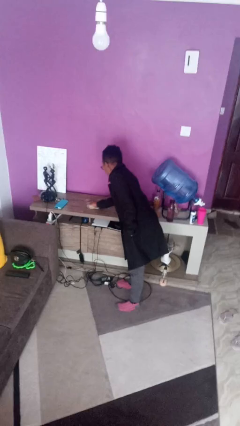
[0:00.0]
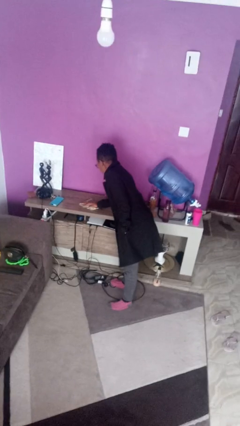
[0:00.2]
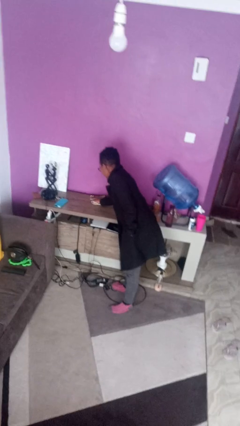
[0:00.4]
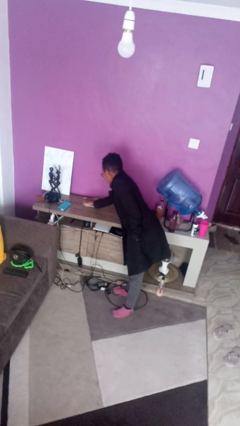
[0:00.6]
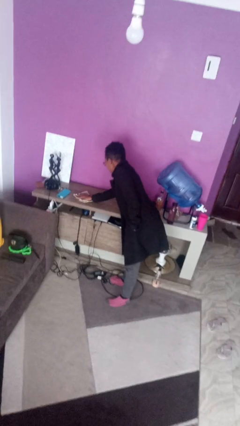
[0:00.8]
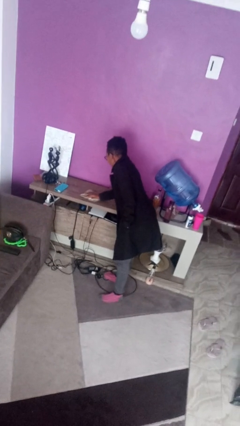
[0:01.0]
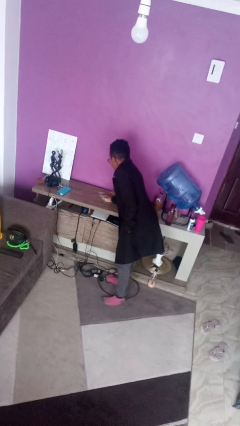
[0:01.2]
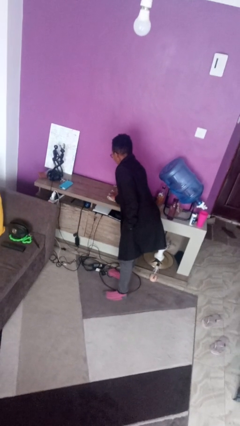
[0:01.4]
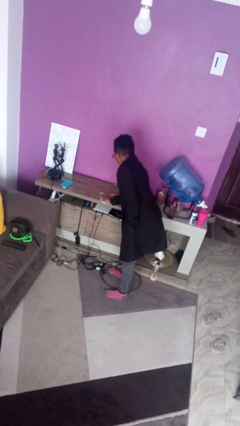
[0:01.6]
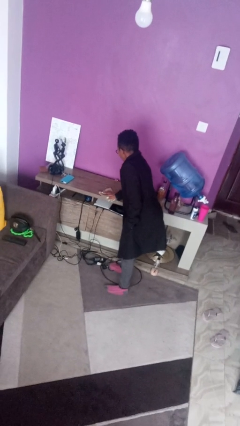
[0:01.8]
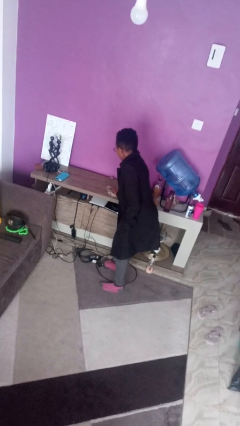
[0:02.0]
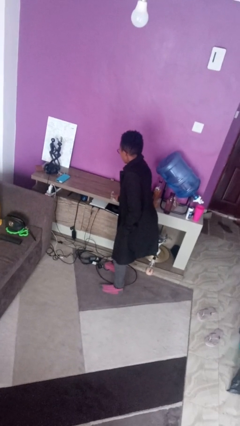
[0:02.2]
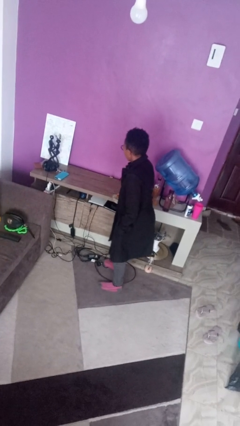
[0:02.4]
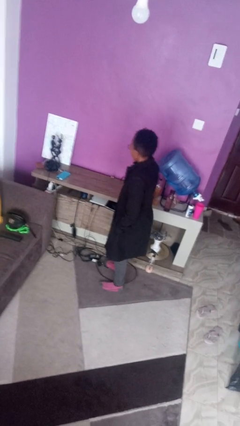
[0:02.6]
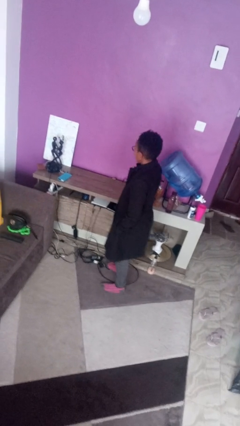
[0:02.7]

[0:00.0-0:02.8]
person cleans table with rag

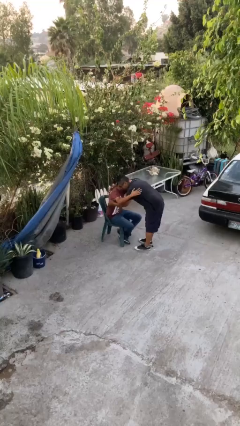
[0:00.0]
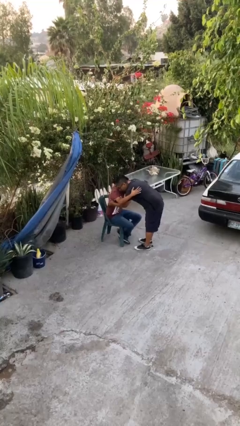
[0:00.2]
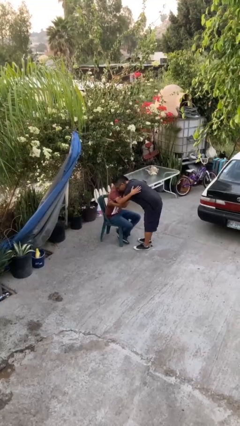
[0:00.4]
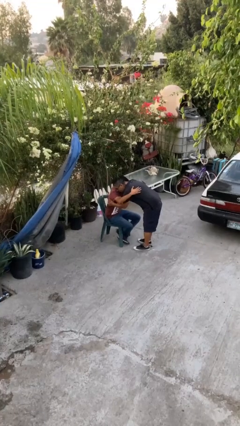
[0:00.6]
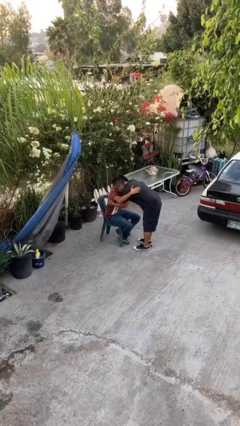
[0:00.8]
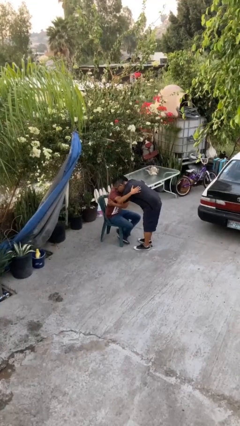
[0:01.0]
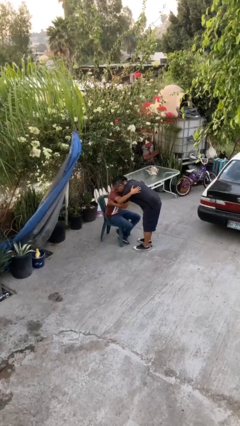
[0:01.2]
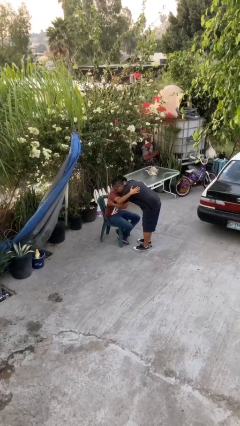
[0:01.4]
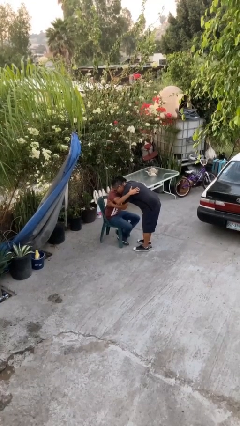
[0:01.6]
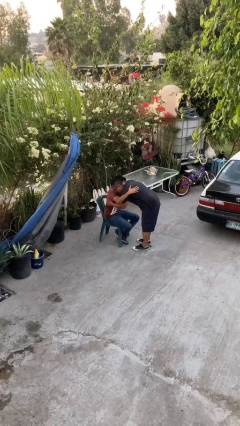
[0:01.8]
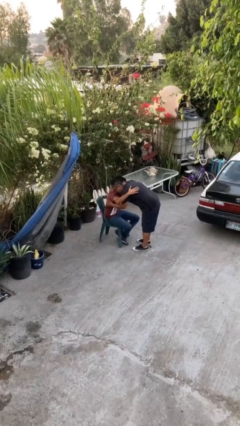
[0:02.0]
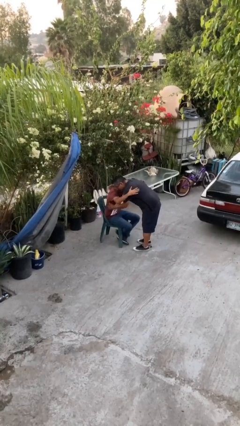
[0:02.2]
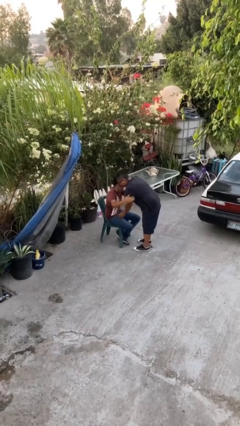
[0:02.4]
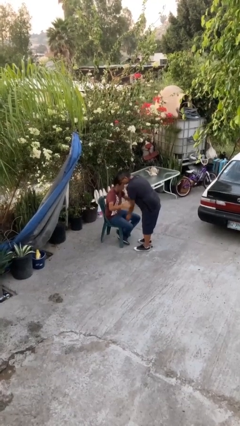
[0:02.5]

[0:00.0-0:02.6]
person embraces person

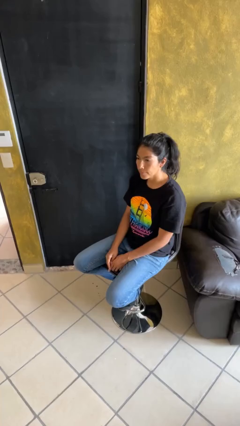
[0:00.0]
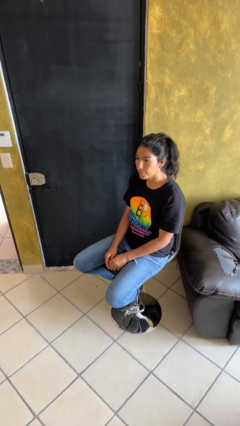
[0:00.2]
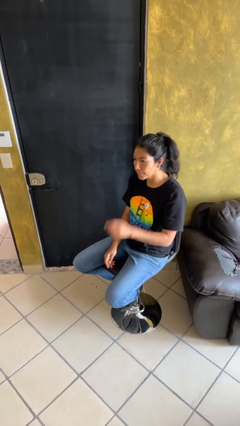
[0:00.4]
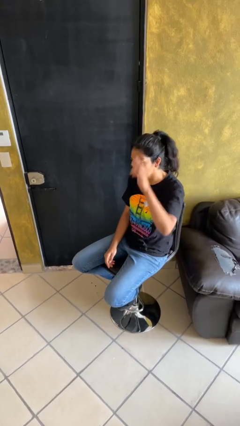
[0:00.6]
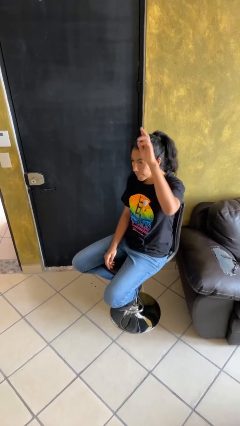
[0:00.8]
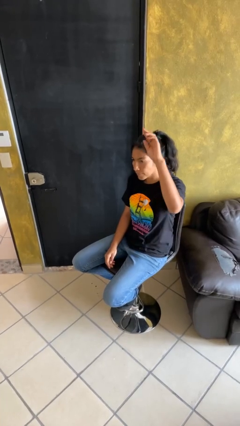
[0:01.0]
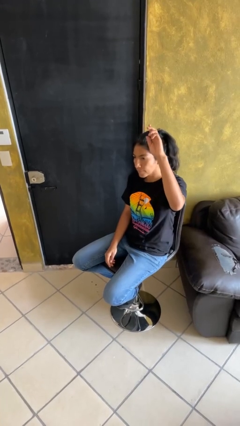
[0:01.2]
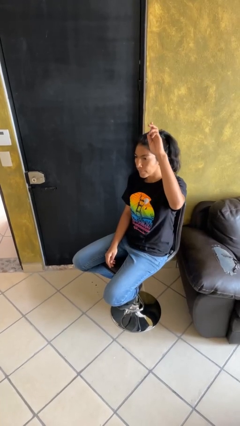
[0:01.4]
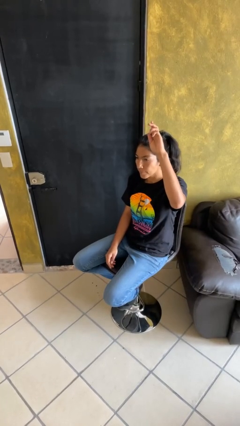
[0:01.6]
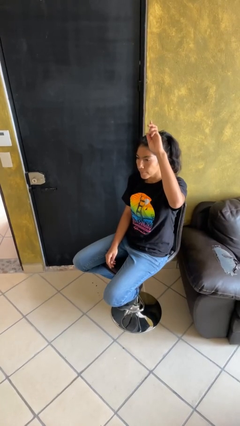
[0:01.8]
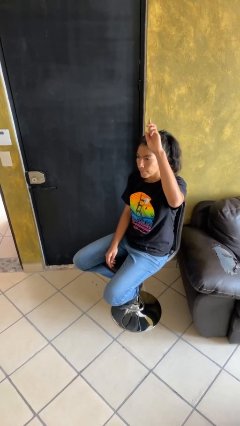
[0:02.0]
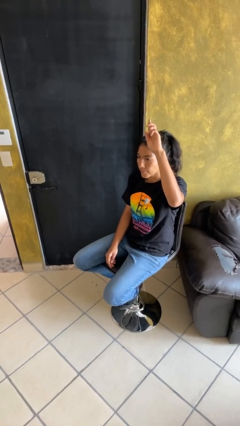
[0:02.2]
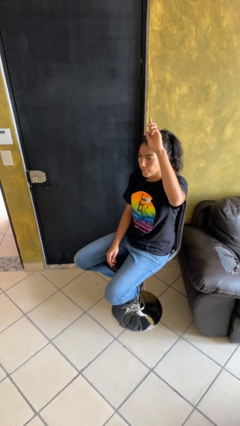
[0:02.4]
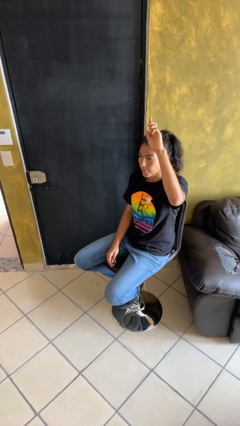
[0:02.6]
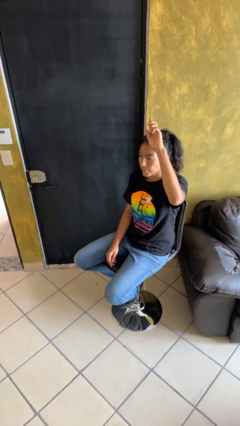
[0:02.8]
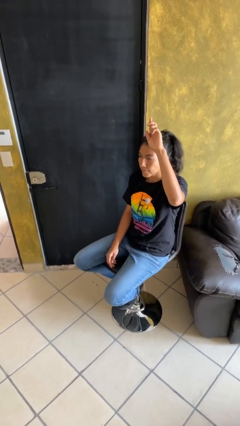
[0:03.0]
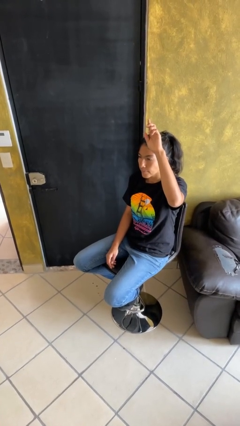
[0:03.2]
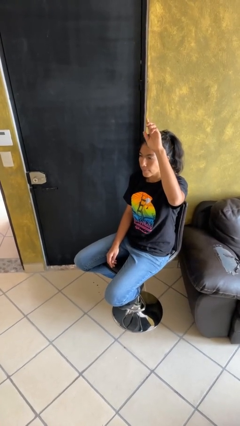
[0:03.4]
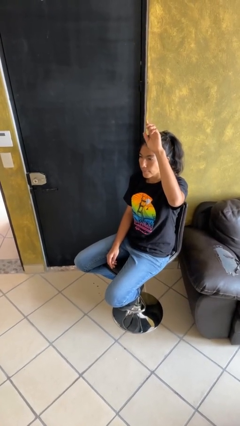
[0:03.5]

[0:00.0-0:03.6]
person gestures raise hand

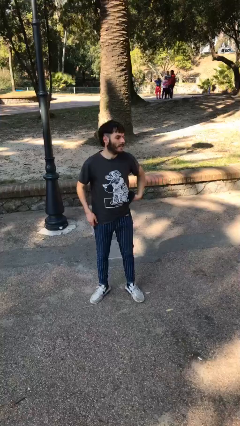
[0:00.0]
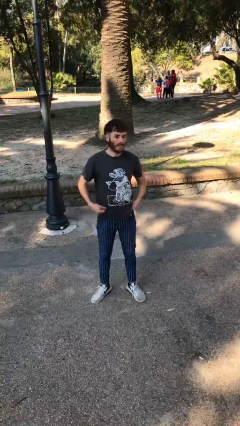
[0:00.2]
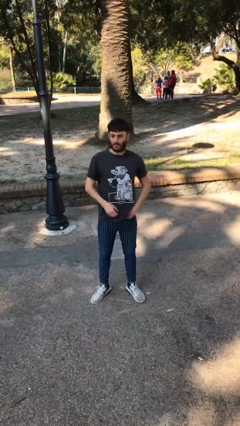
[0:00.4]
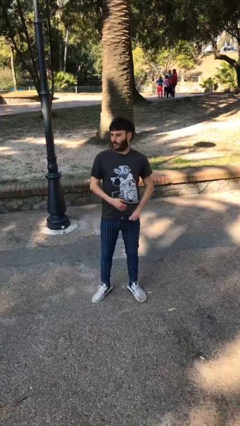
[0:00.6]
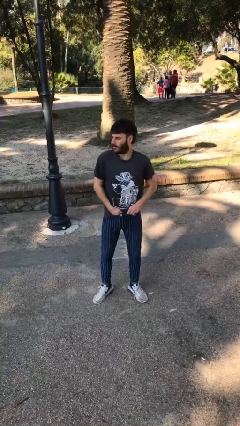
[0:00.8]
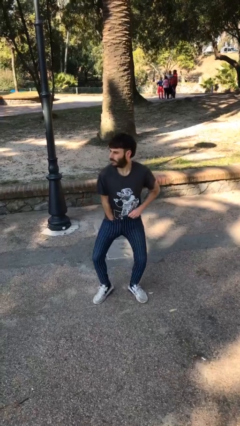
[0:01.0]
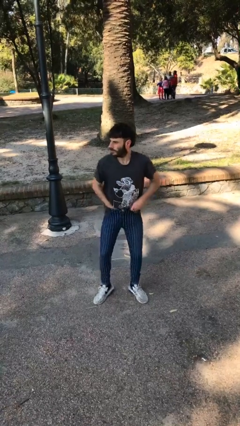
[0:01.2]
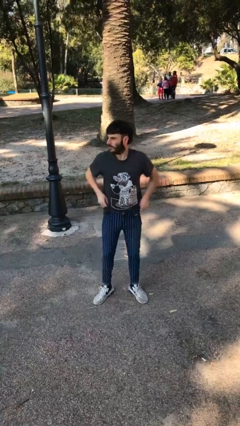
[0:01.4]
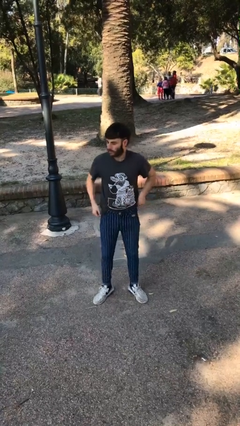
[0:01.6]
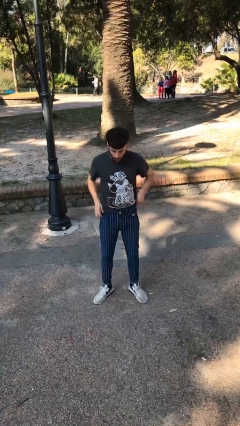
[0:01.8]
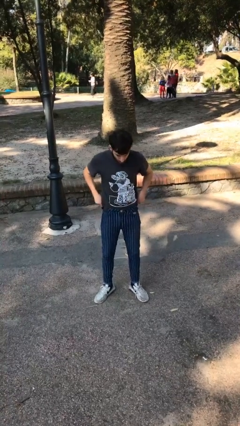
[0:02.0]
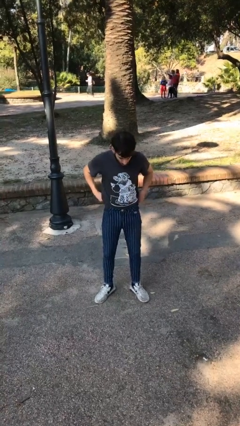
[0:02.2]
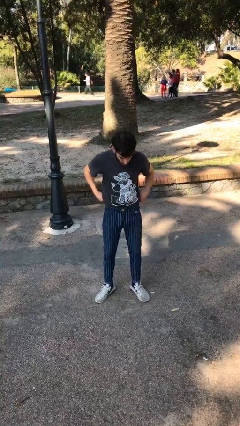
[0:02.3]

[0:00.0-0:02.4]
person tucks in shirt

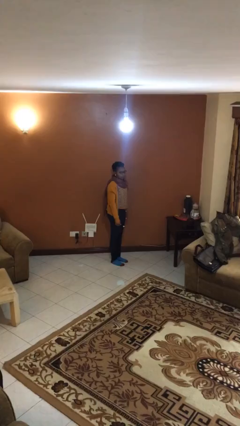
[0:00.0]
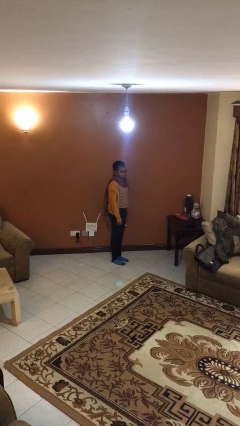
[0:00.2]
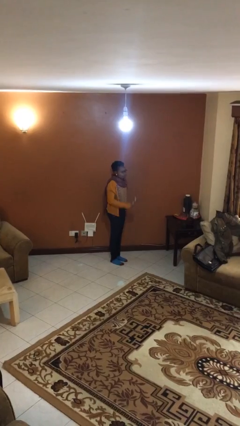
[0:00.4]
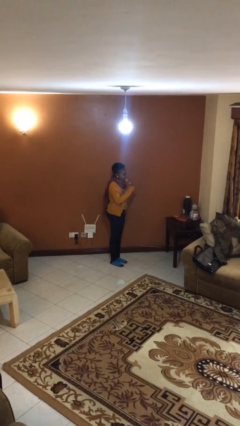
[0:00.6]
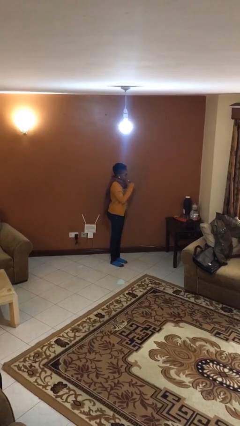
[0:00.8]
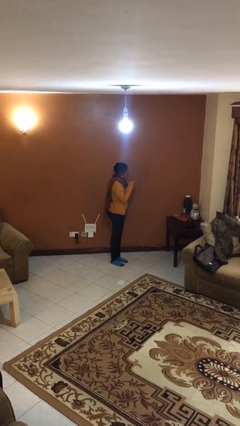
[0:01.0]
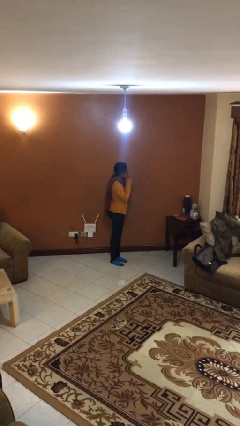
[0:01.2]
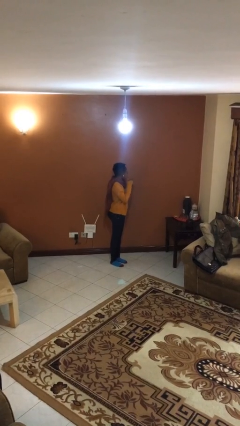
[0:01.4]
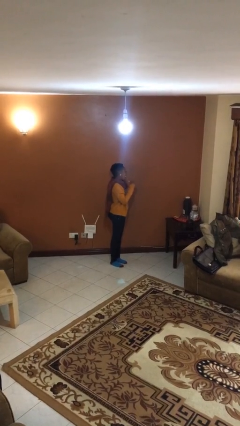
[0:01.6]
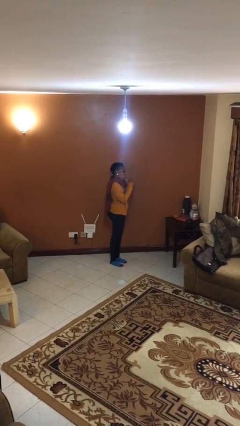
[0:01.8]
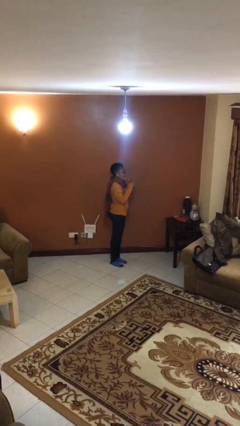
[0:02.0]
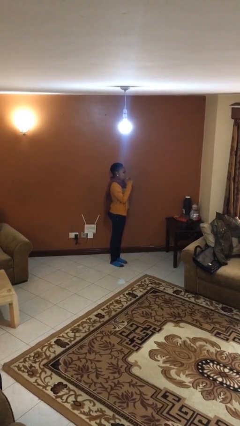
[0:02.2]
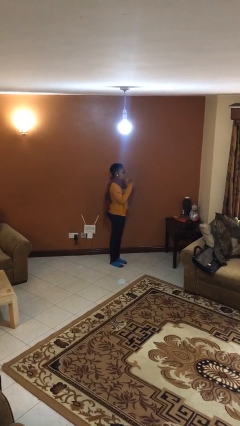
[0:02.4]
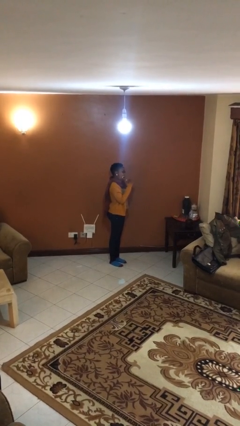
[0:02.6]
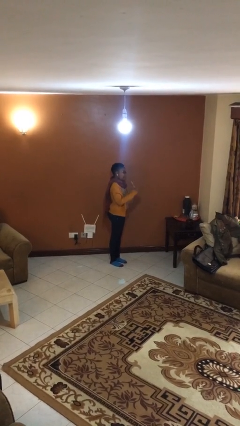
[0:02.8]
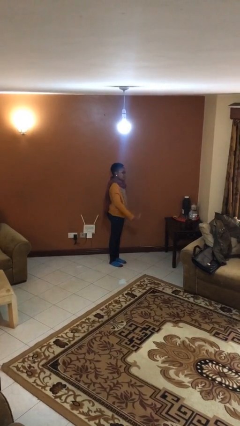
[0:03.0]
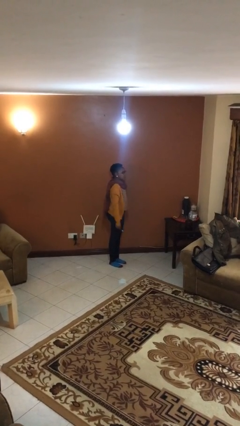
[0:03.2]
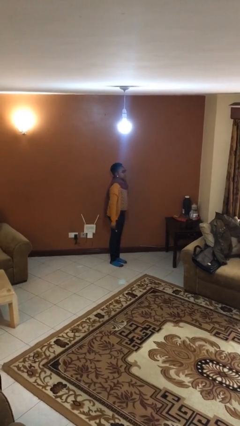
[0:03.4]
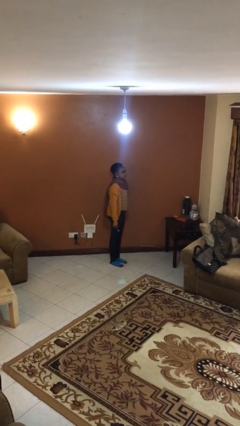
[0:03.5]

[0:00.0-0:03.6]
person brushes teeth

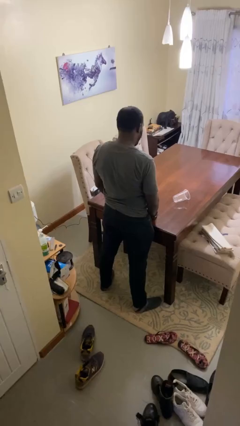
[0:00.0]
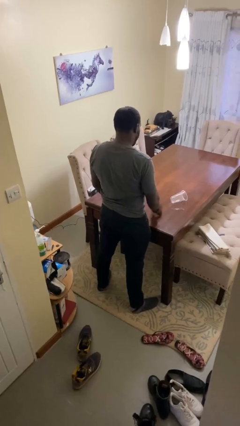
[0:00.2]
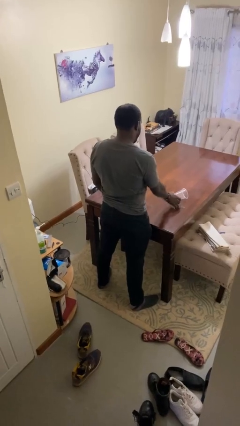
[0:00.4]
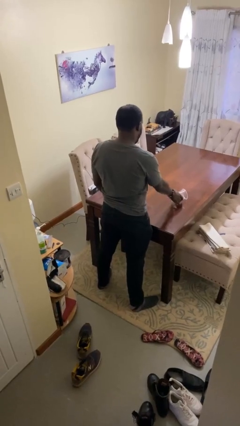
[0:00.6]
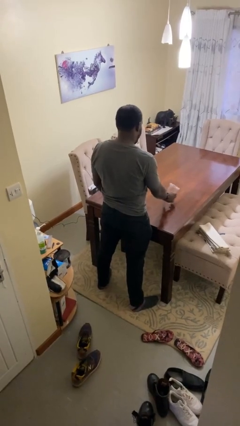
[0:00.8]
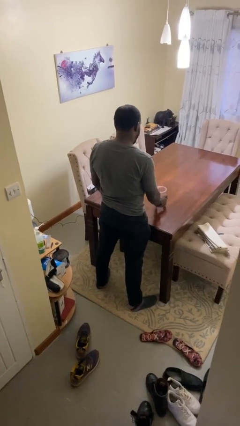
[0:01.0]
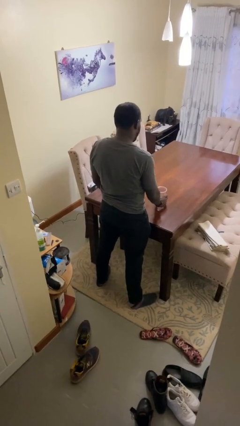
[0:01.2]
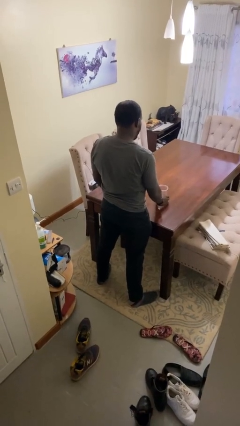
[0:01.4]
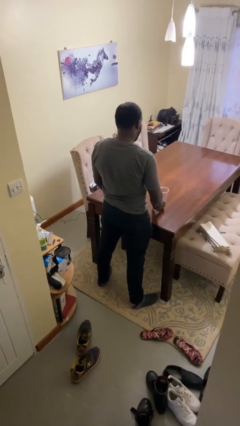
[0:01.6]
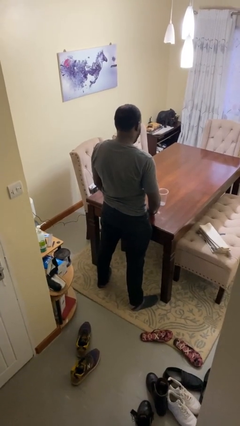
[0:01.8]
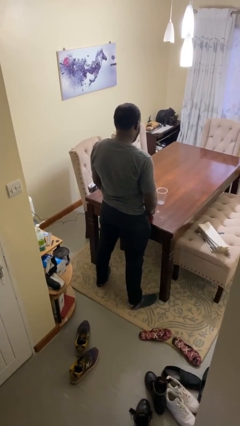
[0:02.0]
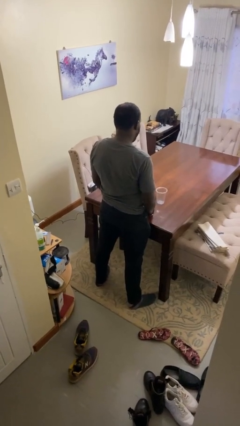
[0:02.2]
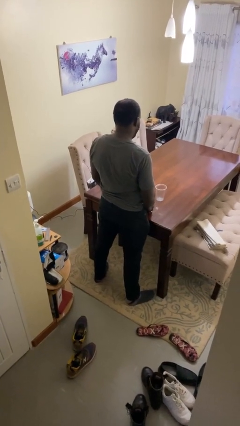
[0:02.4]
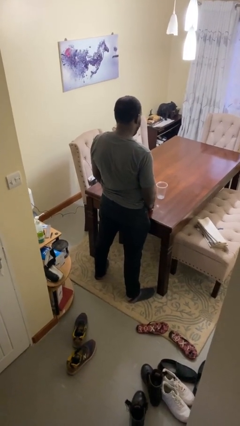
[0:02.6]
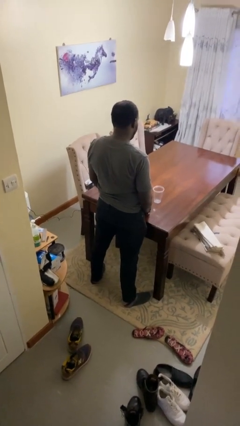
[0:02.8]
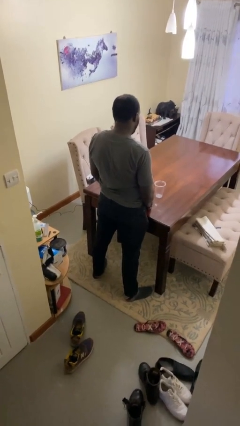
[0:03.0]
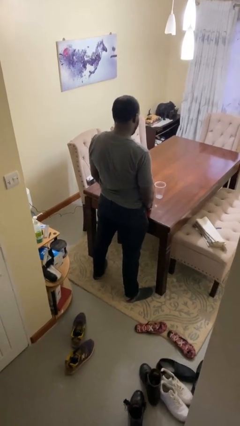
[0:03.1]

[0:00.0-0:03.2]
person sets upright glass
